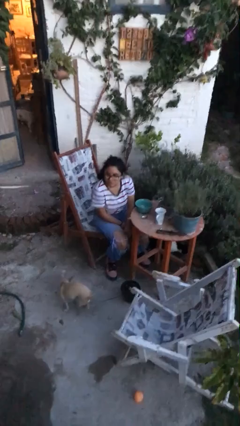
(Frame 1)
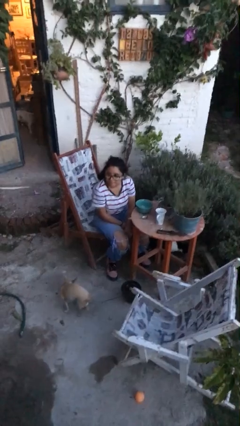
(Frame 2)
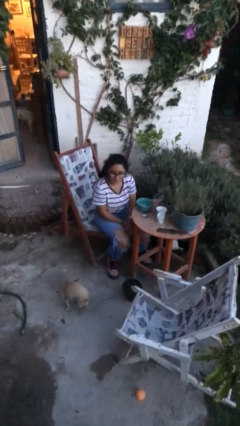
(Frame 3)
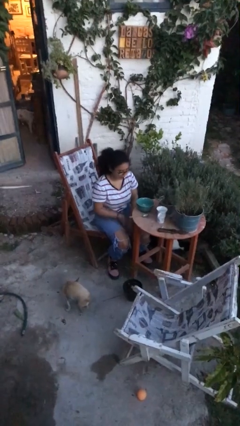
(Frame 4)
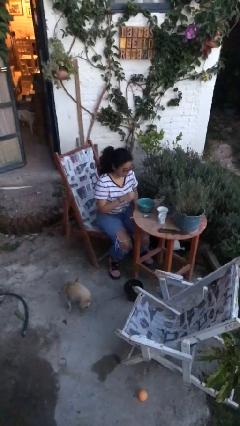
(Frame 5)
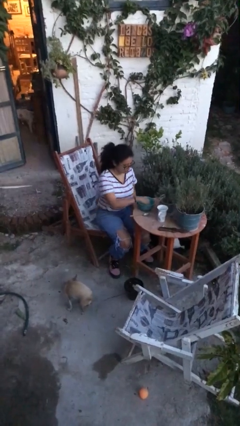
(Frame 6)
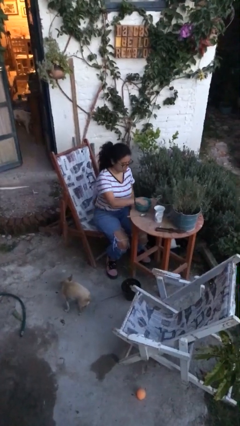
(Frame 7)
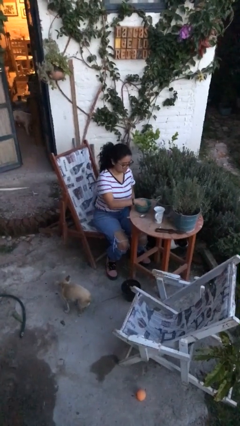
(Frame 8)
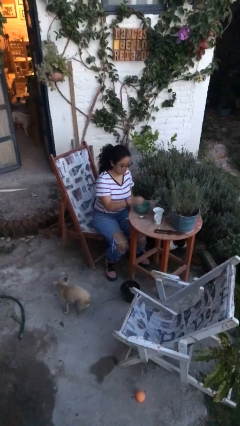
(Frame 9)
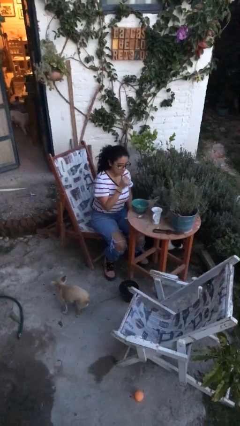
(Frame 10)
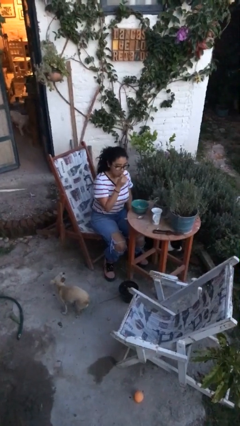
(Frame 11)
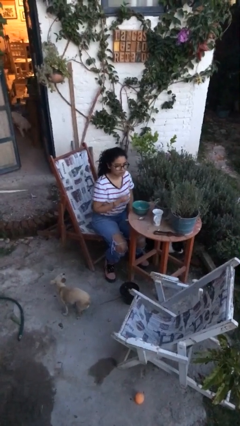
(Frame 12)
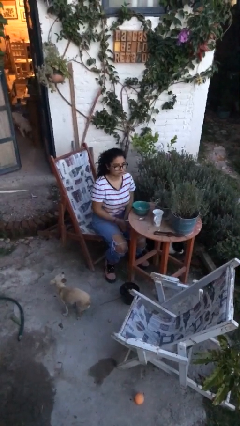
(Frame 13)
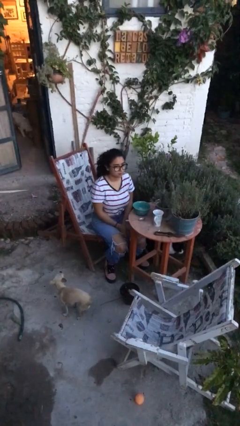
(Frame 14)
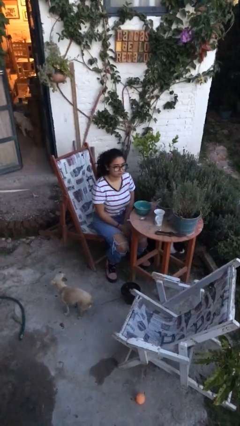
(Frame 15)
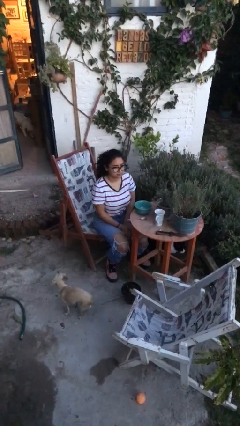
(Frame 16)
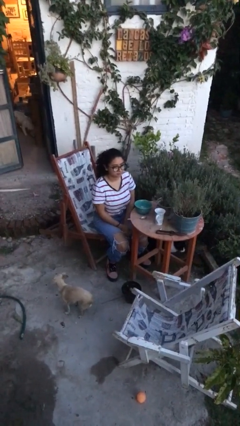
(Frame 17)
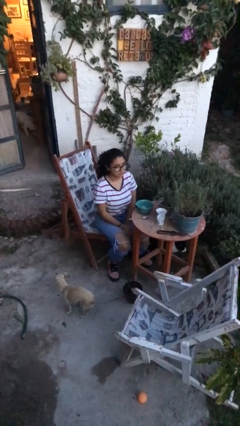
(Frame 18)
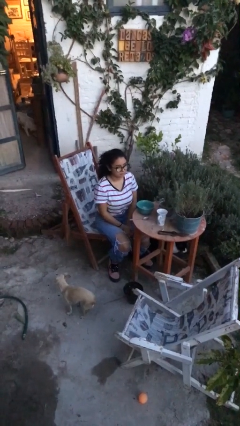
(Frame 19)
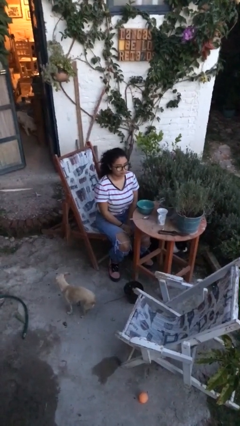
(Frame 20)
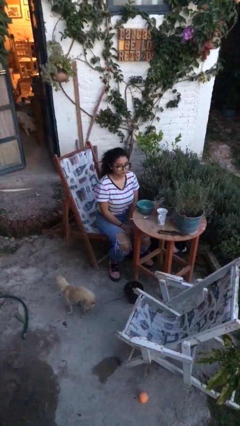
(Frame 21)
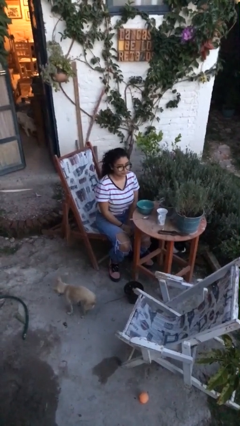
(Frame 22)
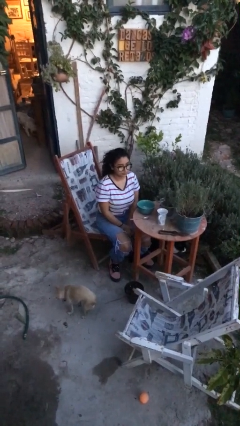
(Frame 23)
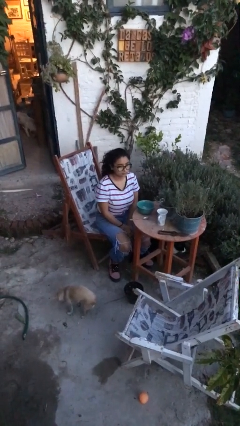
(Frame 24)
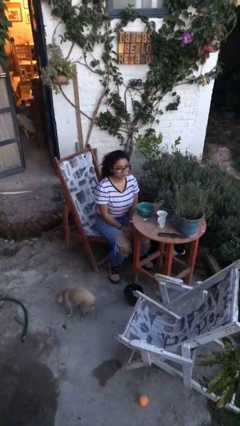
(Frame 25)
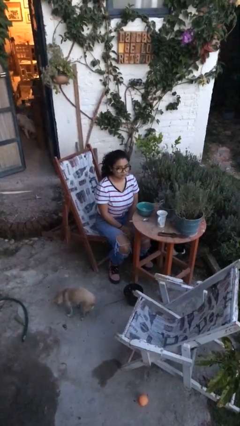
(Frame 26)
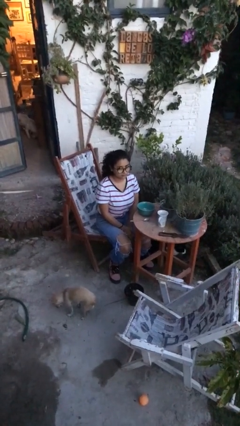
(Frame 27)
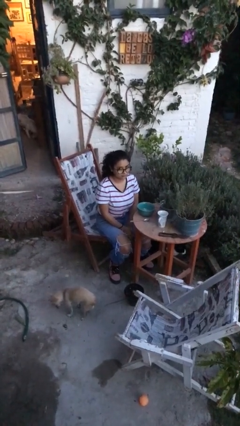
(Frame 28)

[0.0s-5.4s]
person eats with hands

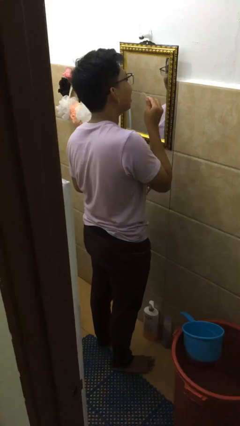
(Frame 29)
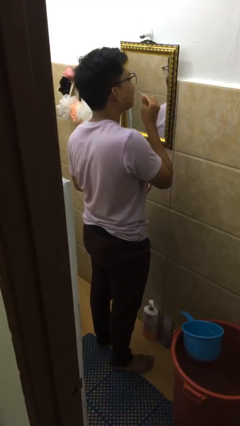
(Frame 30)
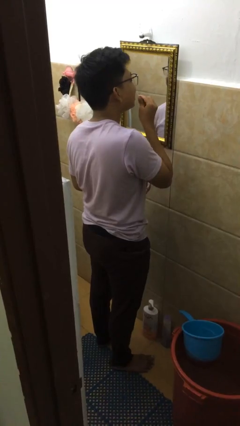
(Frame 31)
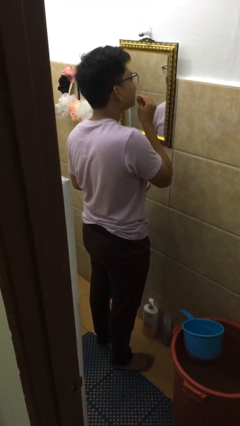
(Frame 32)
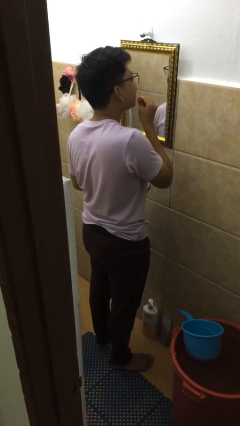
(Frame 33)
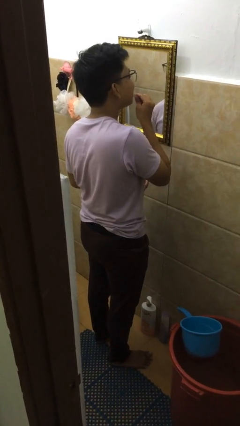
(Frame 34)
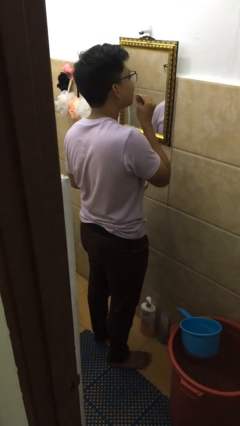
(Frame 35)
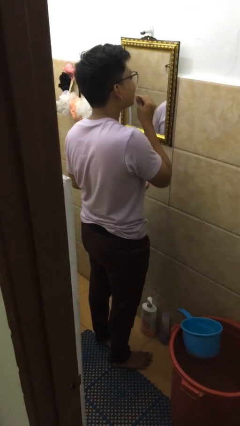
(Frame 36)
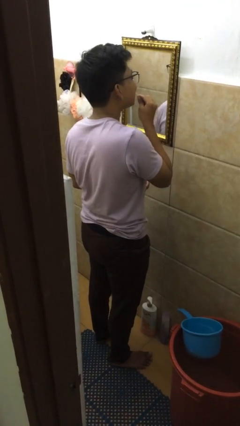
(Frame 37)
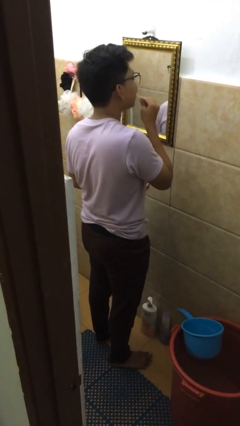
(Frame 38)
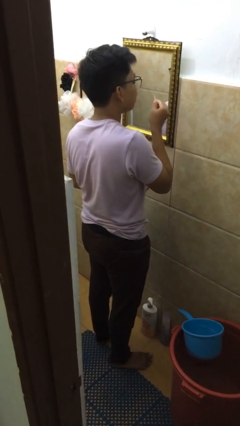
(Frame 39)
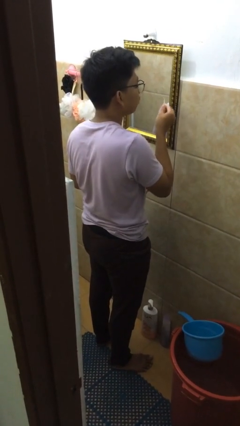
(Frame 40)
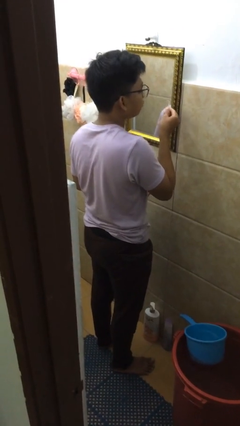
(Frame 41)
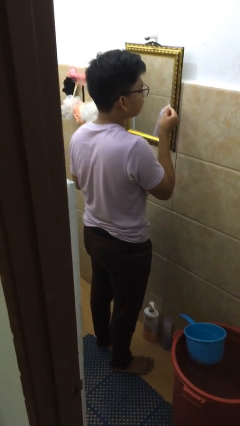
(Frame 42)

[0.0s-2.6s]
person flosses

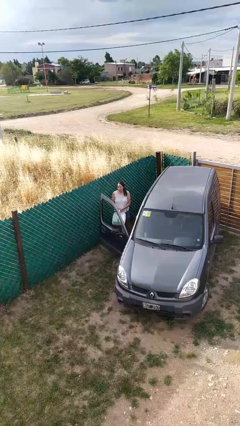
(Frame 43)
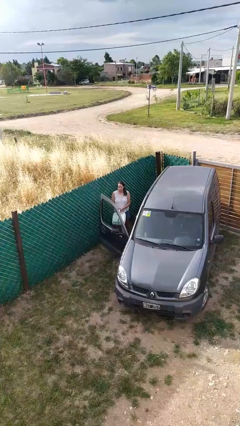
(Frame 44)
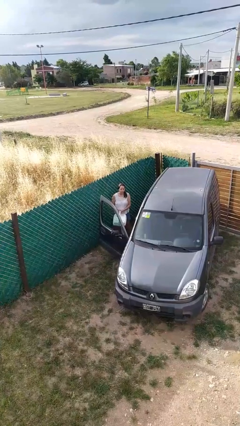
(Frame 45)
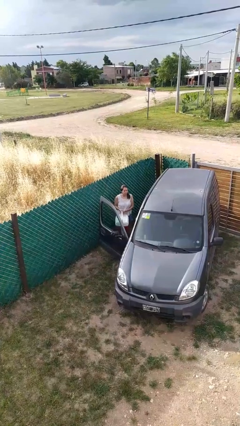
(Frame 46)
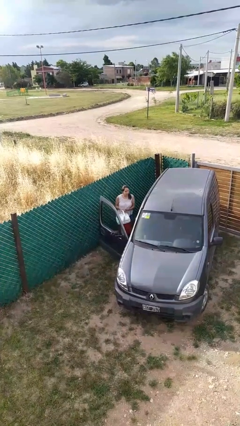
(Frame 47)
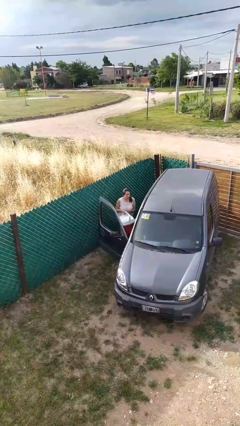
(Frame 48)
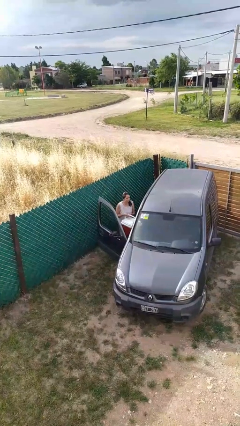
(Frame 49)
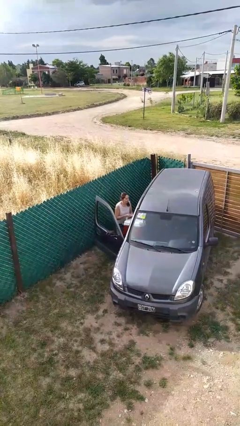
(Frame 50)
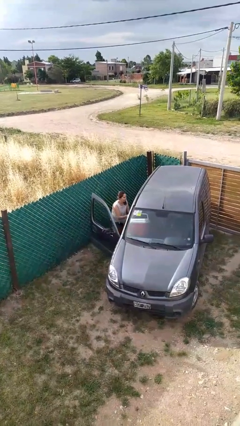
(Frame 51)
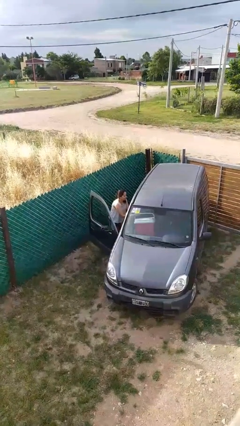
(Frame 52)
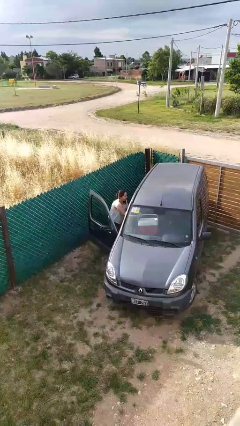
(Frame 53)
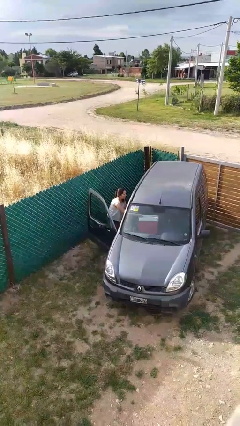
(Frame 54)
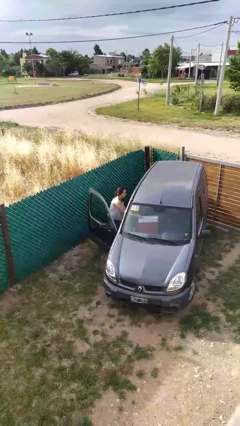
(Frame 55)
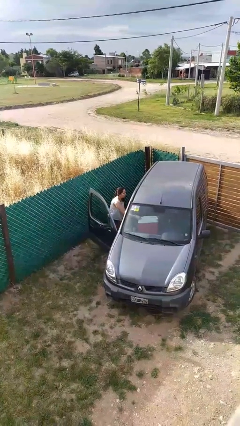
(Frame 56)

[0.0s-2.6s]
person loads car

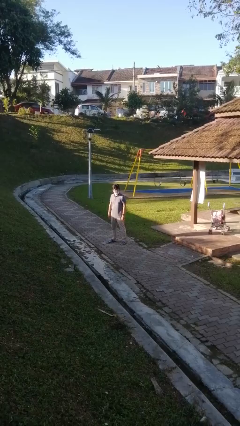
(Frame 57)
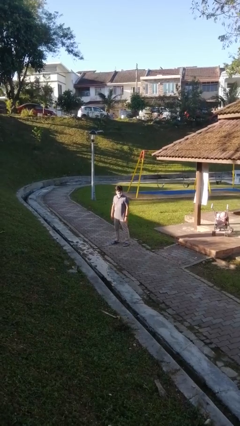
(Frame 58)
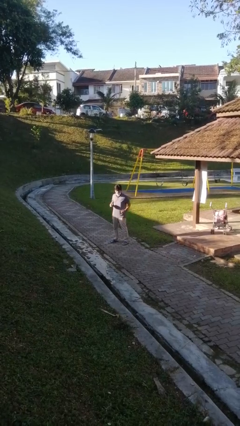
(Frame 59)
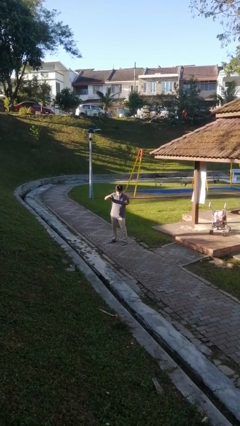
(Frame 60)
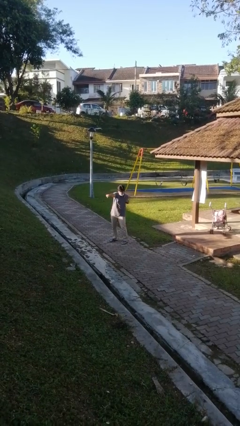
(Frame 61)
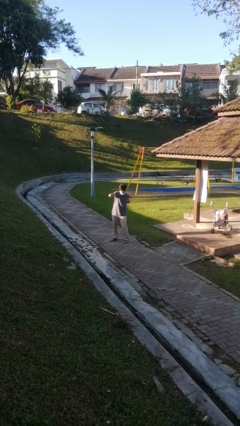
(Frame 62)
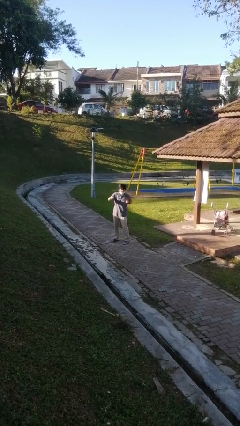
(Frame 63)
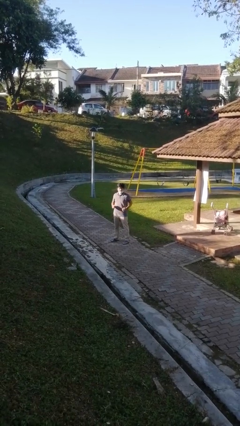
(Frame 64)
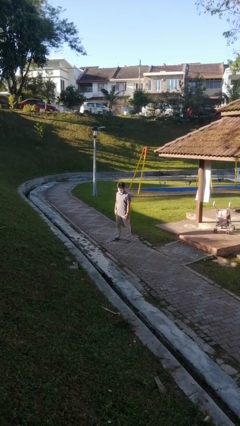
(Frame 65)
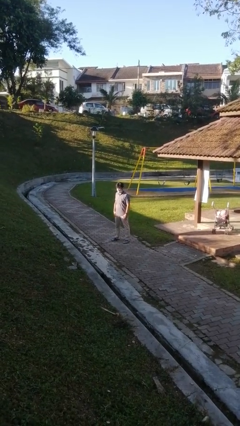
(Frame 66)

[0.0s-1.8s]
person punches

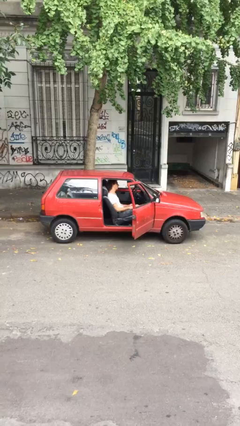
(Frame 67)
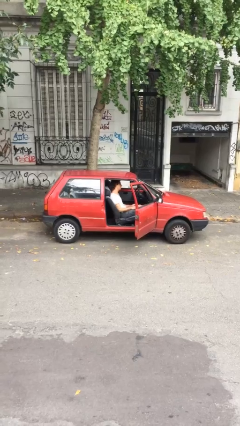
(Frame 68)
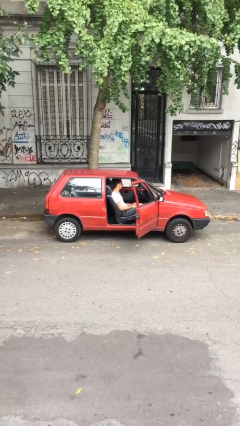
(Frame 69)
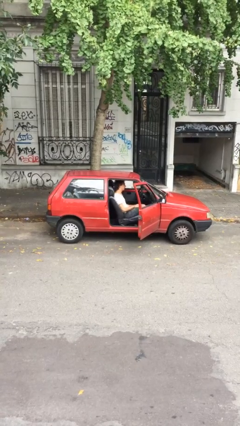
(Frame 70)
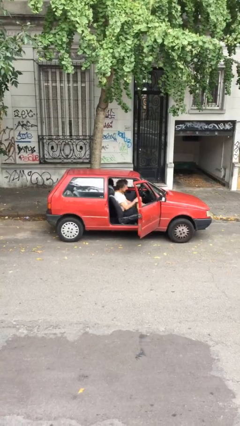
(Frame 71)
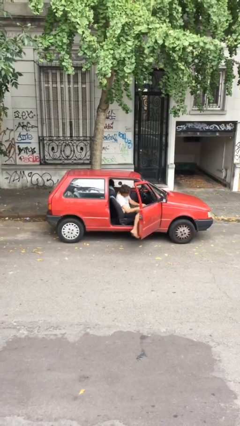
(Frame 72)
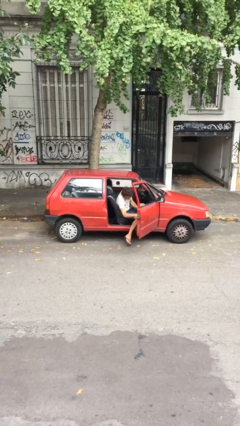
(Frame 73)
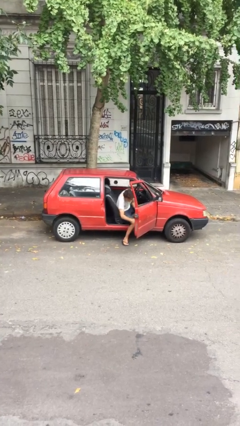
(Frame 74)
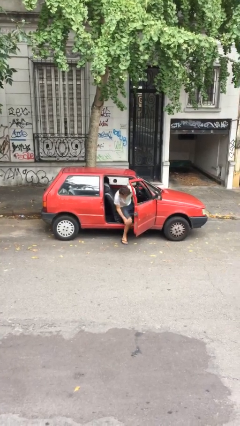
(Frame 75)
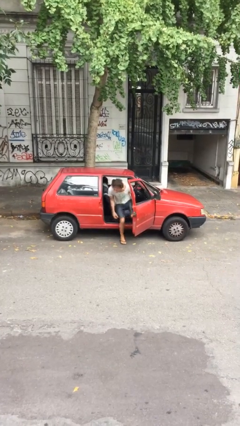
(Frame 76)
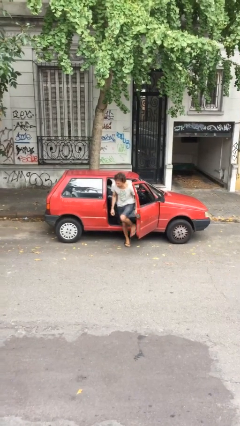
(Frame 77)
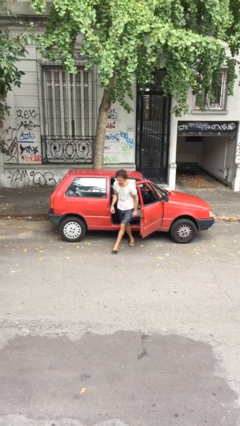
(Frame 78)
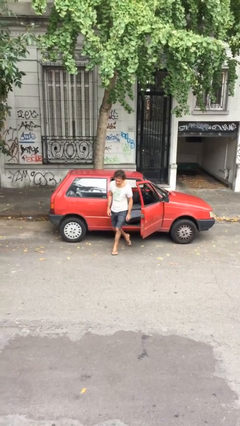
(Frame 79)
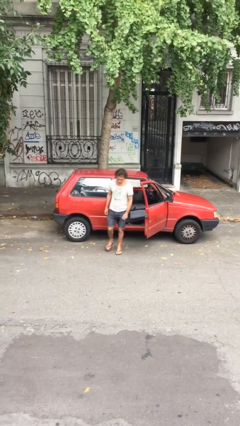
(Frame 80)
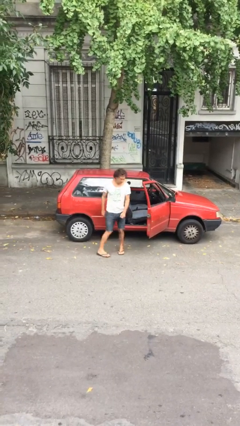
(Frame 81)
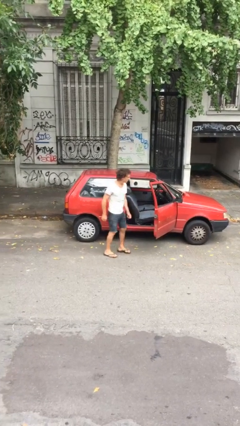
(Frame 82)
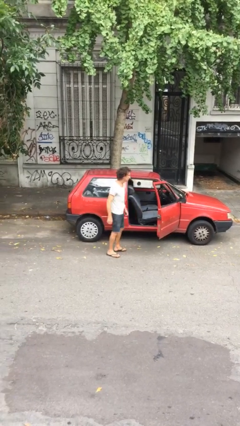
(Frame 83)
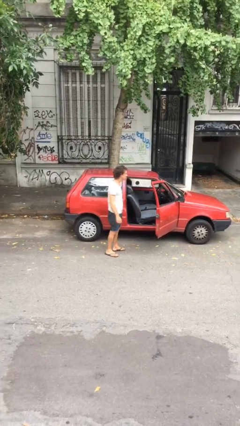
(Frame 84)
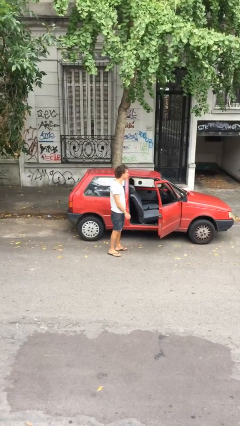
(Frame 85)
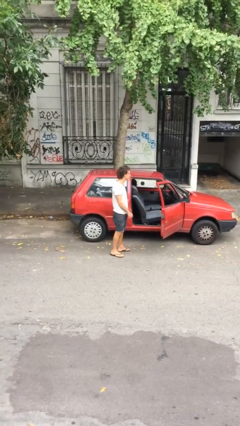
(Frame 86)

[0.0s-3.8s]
person exits car

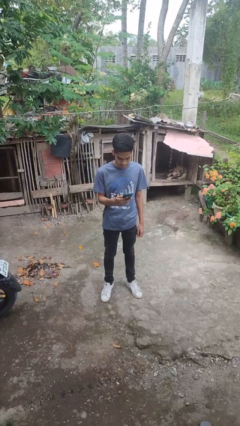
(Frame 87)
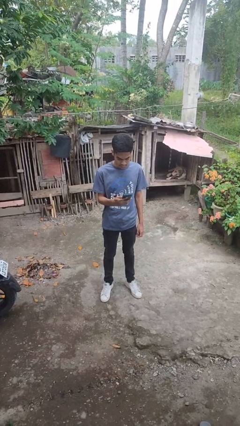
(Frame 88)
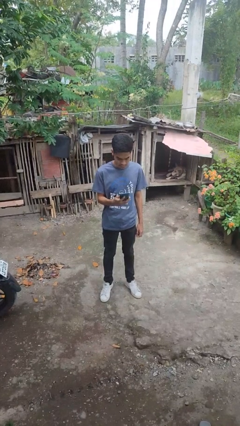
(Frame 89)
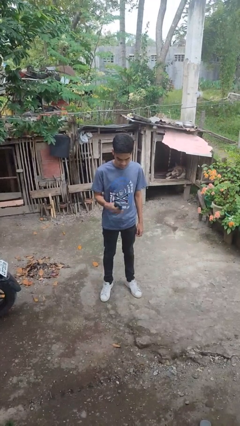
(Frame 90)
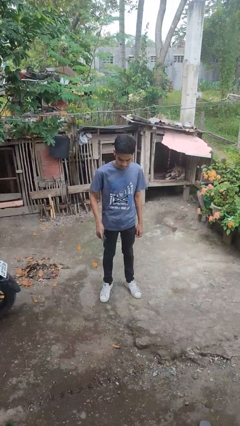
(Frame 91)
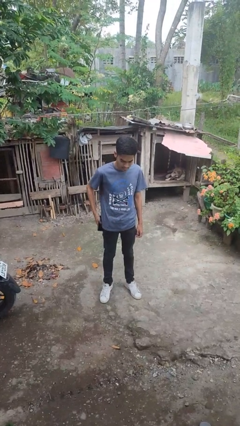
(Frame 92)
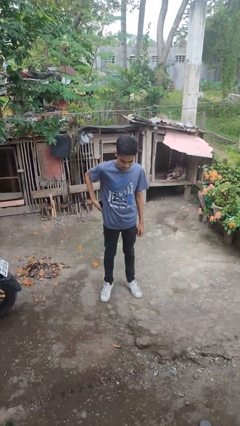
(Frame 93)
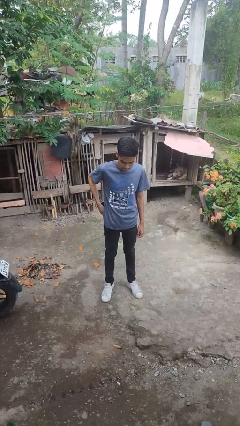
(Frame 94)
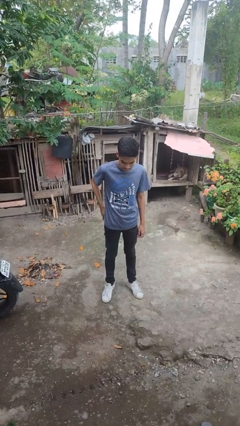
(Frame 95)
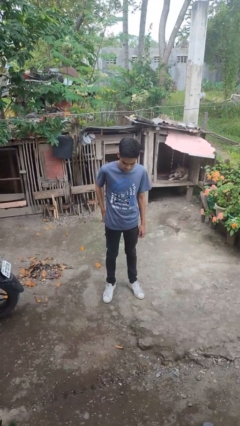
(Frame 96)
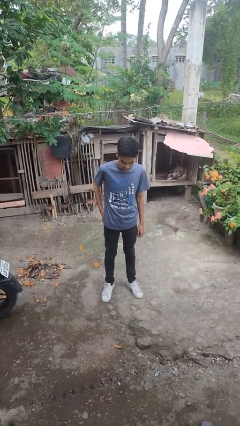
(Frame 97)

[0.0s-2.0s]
person puts phone into pocket
